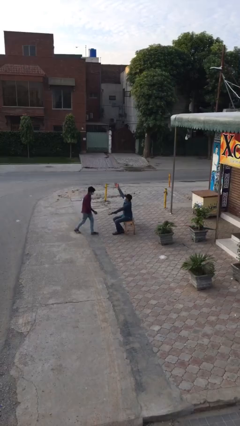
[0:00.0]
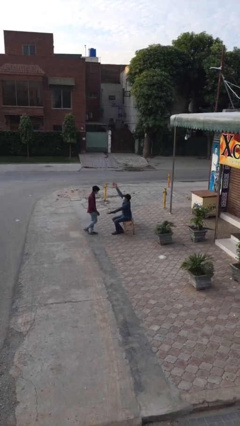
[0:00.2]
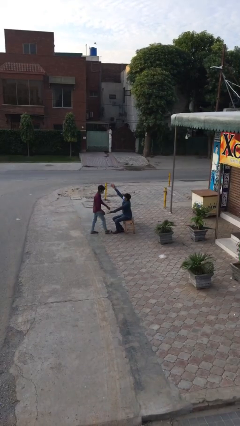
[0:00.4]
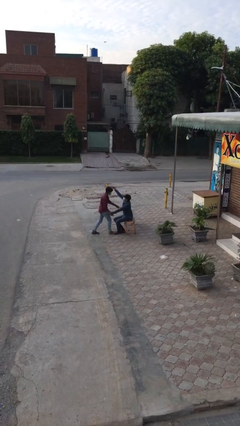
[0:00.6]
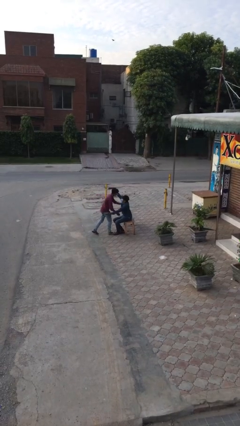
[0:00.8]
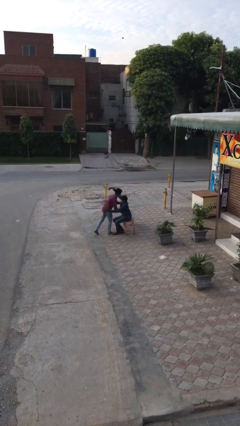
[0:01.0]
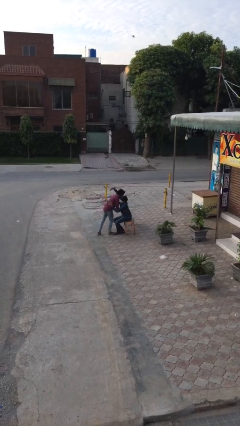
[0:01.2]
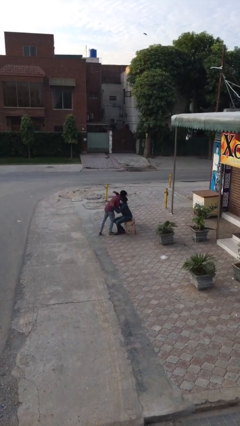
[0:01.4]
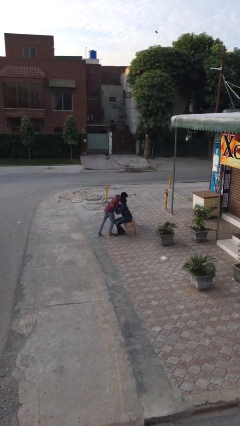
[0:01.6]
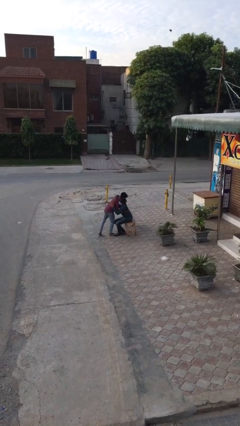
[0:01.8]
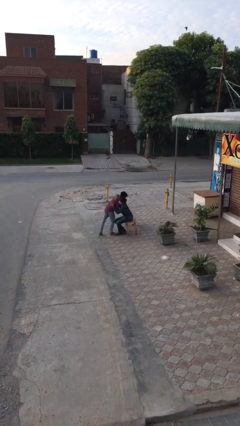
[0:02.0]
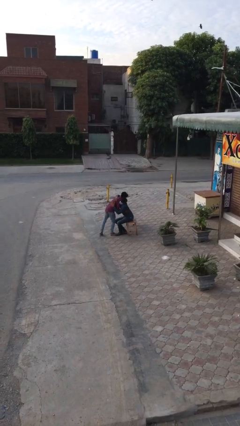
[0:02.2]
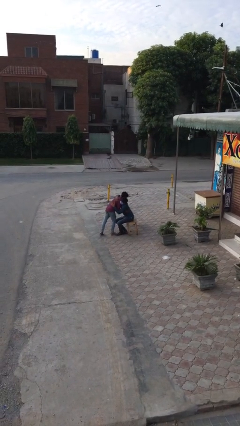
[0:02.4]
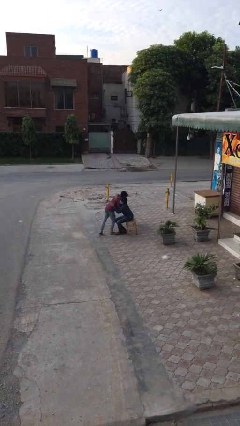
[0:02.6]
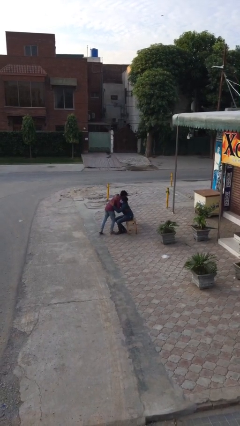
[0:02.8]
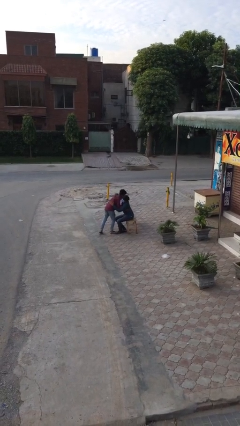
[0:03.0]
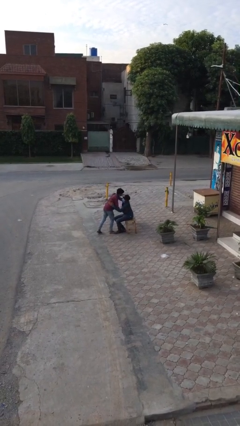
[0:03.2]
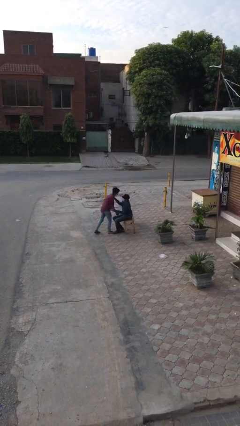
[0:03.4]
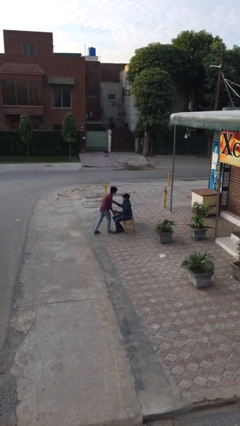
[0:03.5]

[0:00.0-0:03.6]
person embraces person

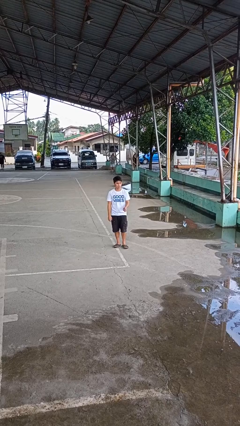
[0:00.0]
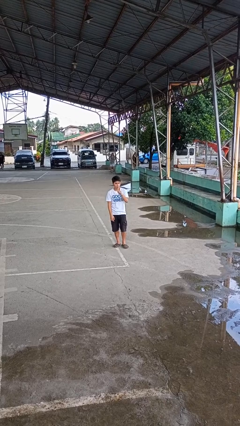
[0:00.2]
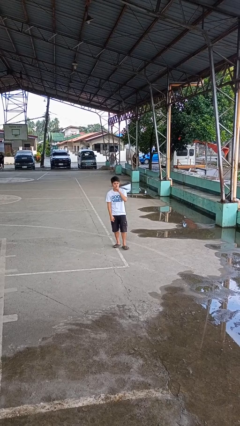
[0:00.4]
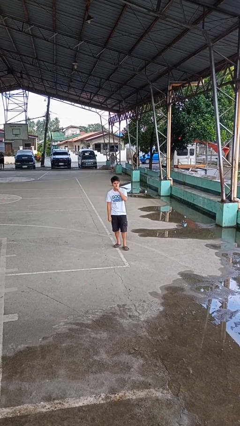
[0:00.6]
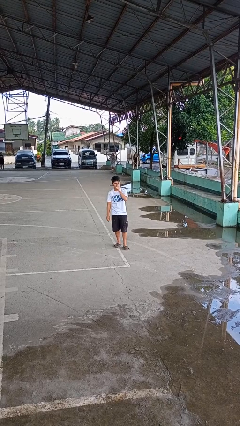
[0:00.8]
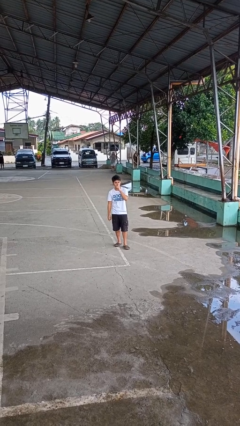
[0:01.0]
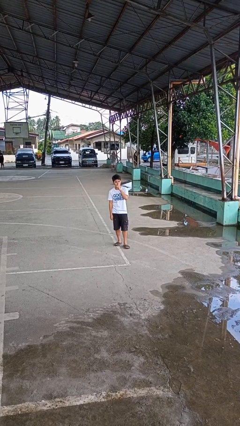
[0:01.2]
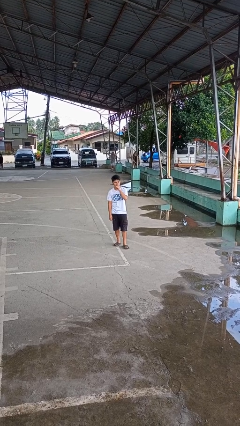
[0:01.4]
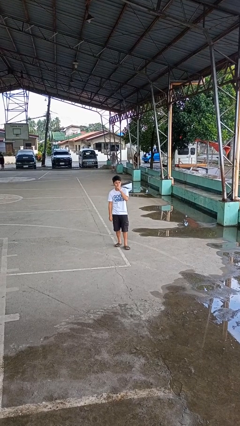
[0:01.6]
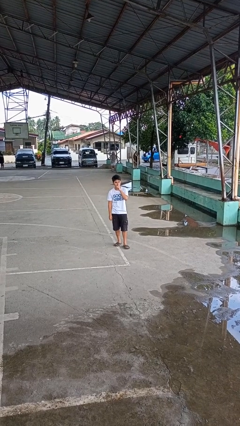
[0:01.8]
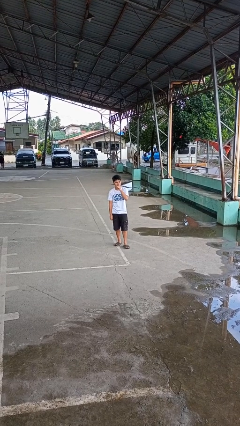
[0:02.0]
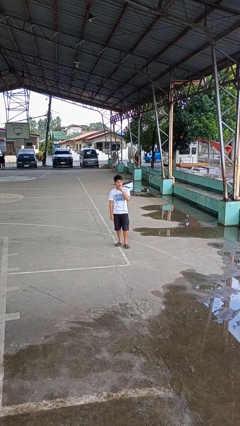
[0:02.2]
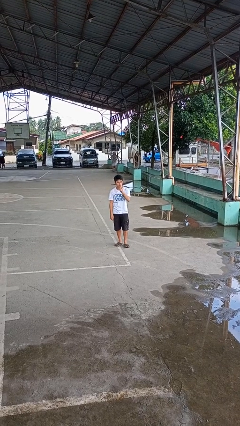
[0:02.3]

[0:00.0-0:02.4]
person gestures be quiet

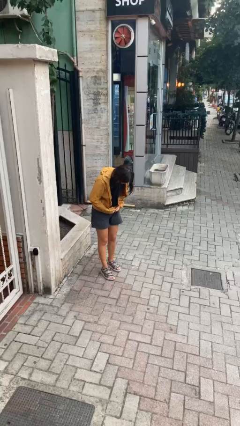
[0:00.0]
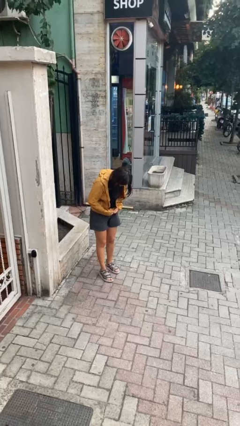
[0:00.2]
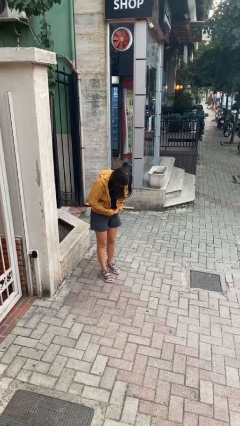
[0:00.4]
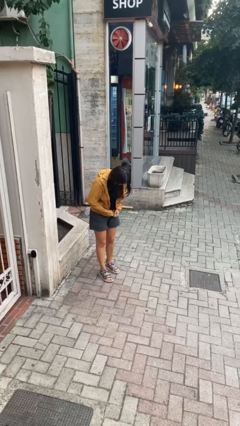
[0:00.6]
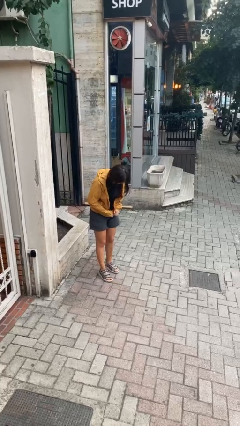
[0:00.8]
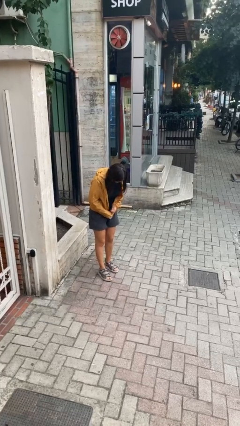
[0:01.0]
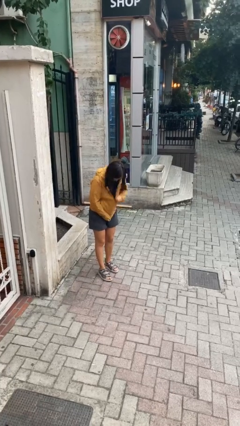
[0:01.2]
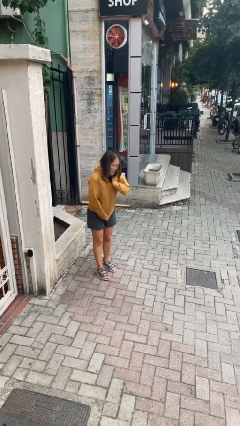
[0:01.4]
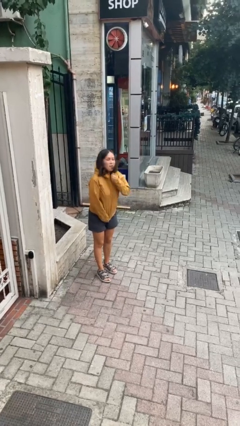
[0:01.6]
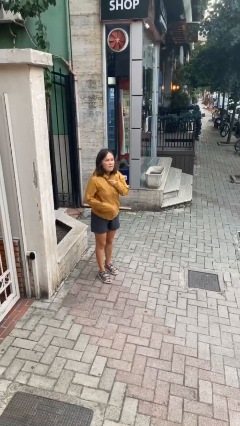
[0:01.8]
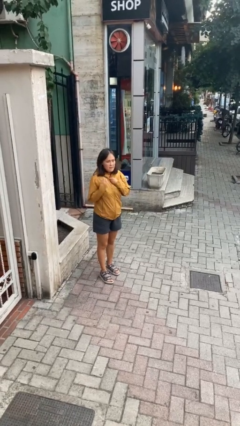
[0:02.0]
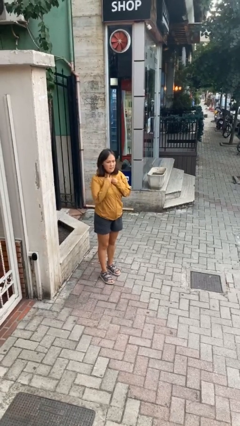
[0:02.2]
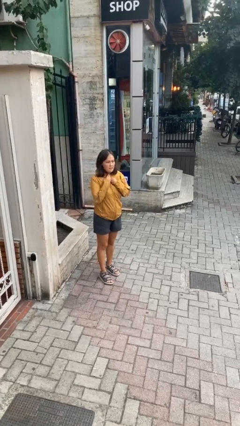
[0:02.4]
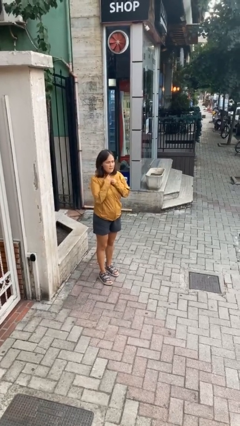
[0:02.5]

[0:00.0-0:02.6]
person zips up jacket

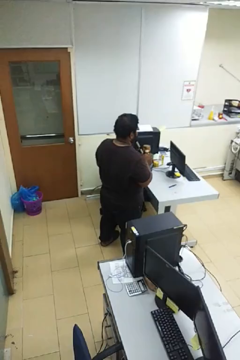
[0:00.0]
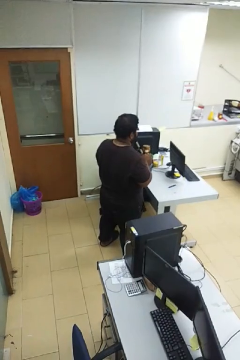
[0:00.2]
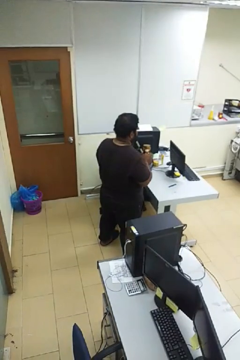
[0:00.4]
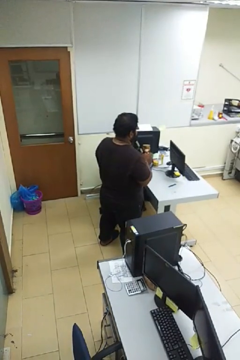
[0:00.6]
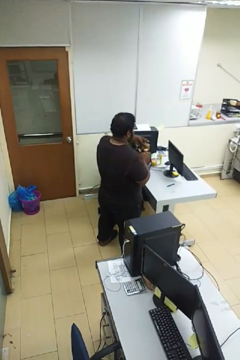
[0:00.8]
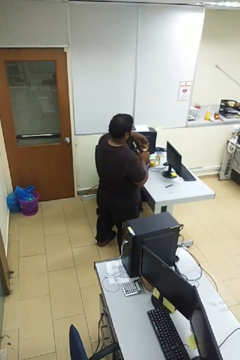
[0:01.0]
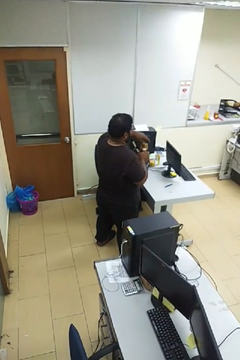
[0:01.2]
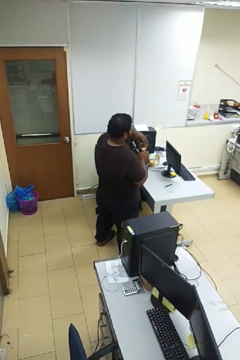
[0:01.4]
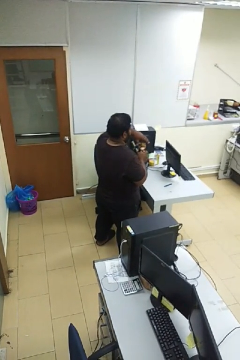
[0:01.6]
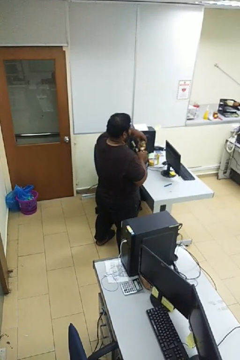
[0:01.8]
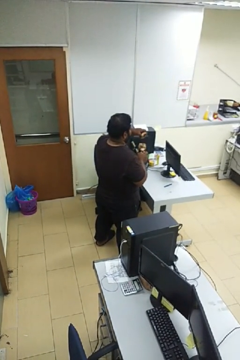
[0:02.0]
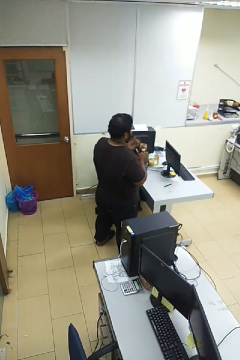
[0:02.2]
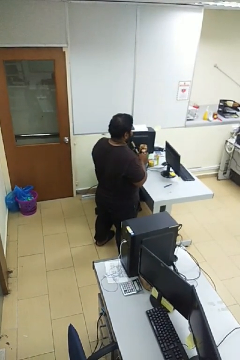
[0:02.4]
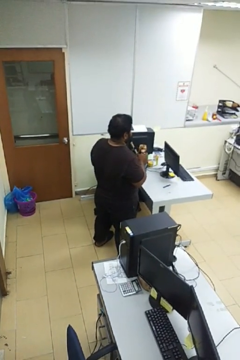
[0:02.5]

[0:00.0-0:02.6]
person opens jar

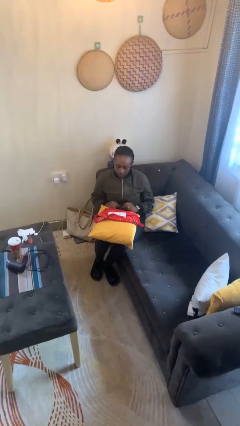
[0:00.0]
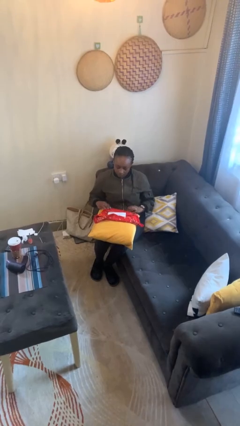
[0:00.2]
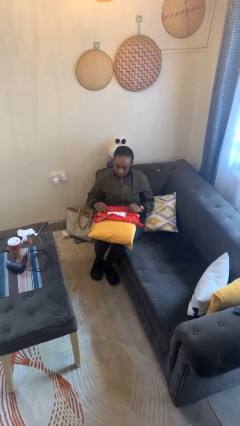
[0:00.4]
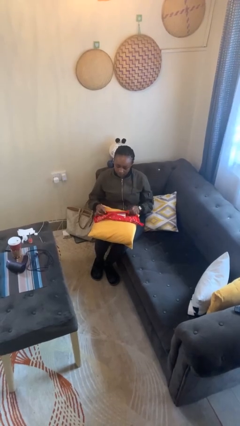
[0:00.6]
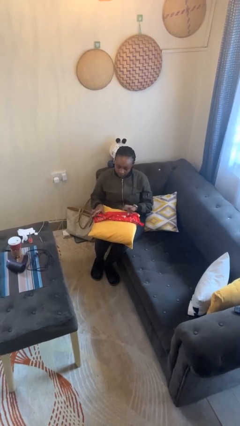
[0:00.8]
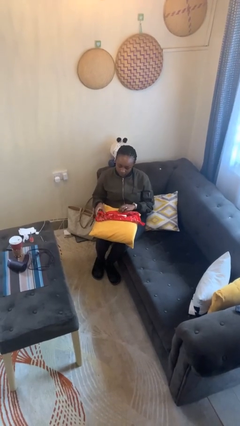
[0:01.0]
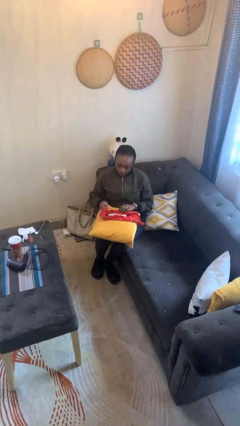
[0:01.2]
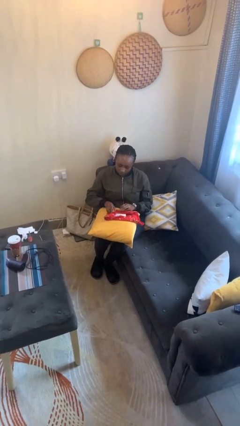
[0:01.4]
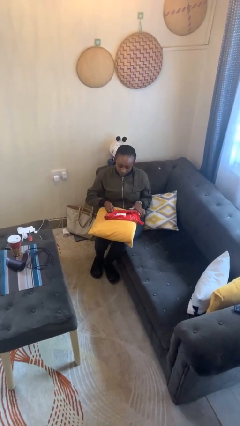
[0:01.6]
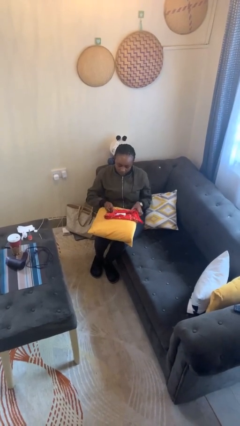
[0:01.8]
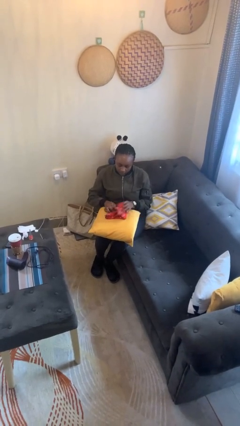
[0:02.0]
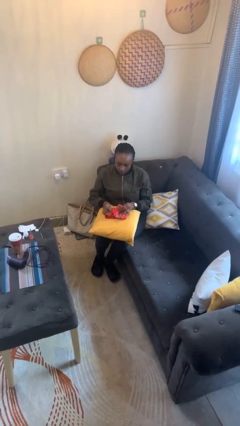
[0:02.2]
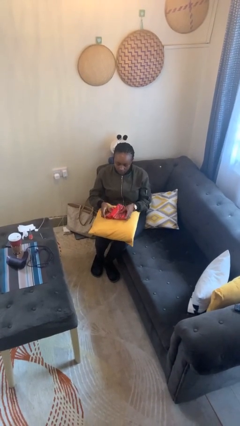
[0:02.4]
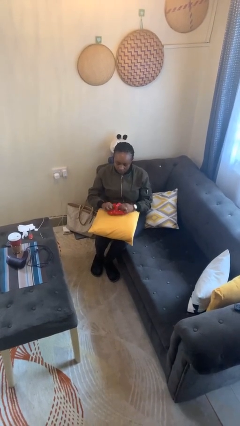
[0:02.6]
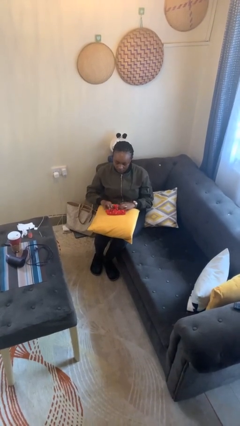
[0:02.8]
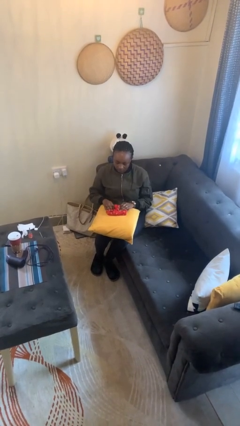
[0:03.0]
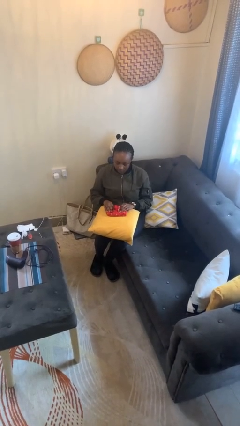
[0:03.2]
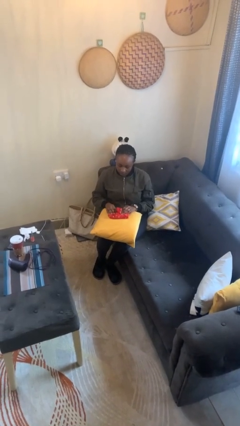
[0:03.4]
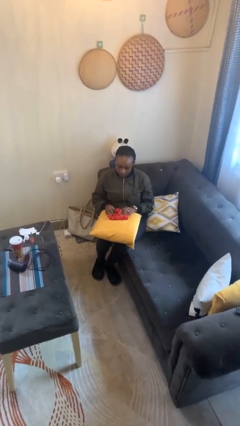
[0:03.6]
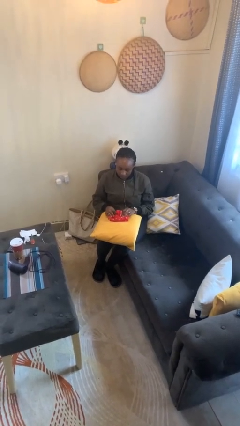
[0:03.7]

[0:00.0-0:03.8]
person wraps box

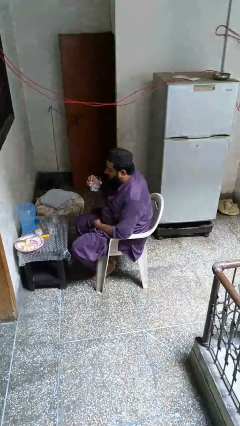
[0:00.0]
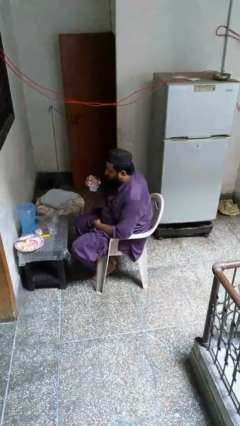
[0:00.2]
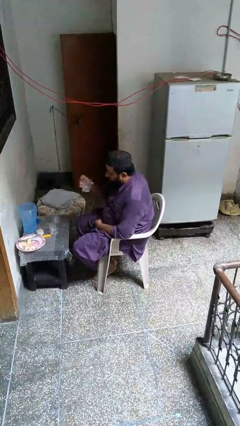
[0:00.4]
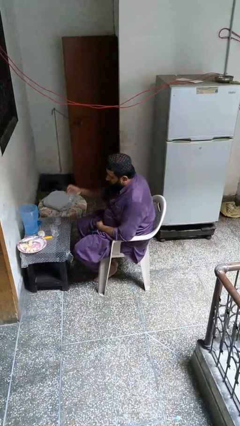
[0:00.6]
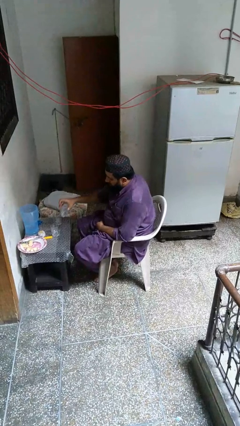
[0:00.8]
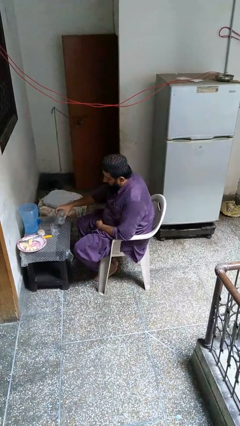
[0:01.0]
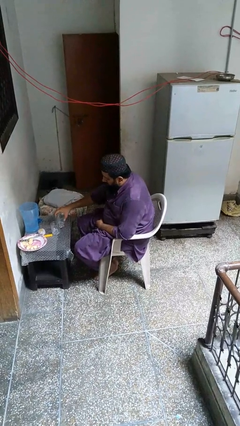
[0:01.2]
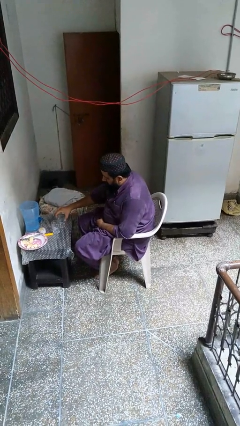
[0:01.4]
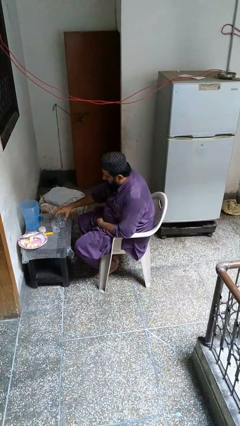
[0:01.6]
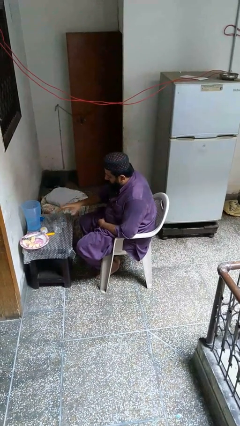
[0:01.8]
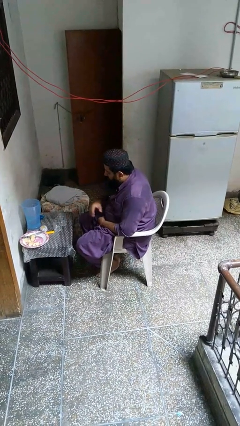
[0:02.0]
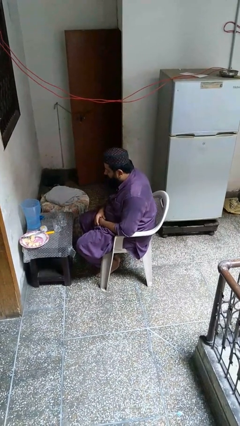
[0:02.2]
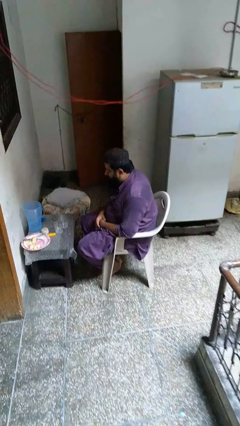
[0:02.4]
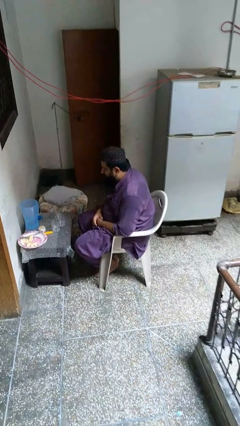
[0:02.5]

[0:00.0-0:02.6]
person puts down object on table
